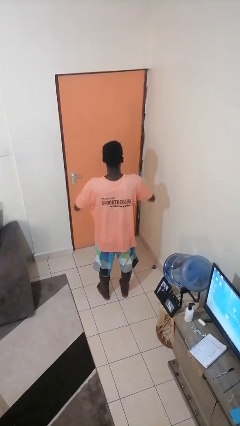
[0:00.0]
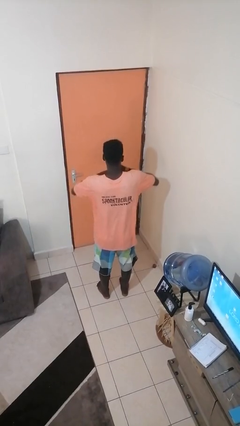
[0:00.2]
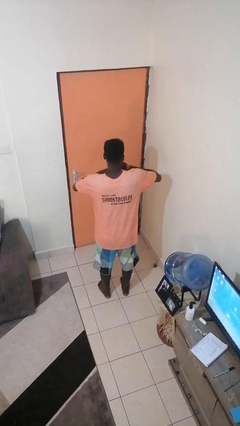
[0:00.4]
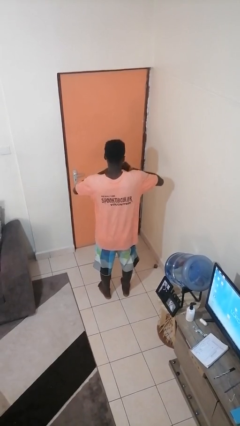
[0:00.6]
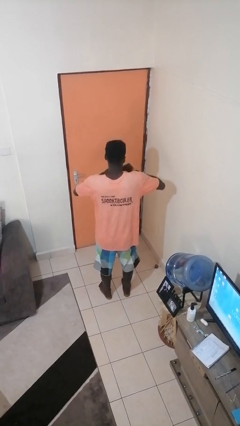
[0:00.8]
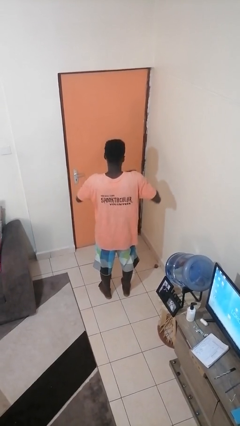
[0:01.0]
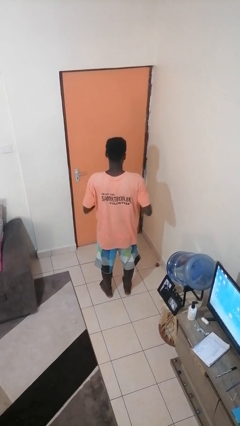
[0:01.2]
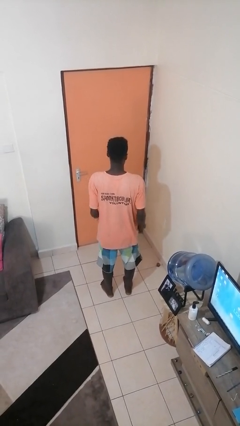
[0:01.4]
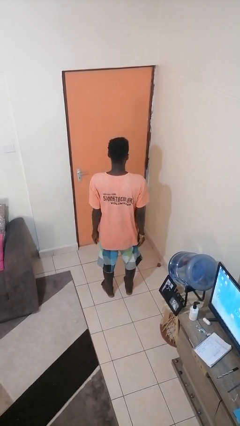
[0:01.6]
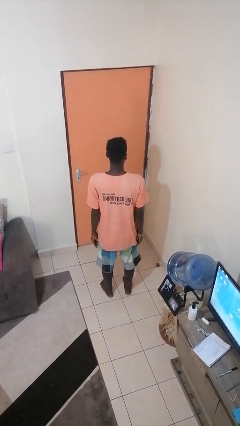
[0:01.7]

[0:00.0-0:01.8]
person takes off ring

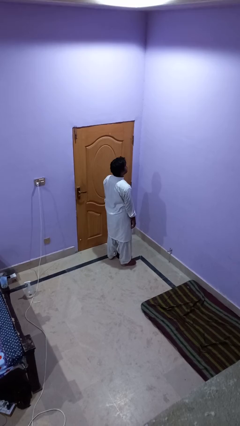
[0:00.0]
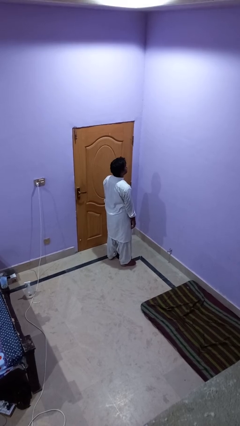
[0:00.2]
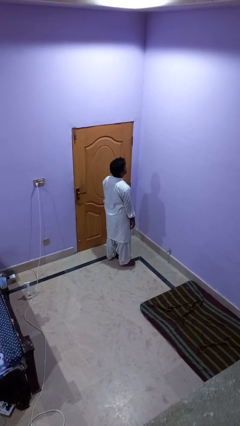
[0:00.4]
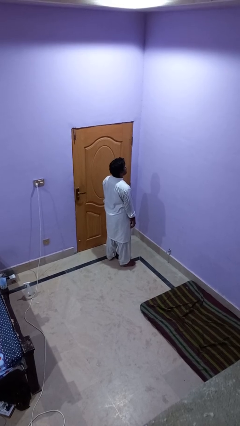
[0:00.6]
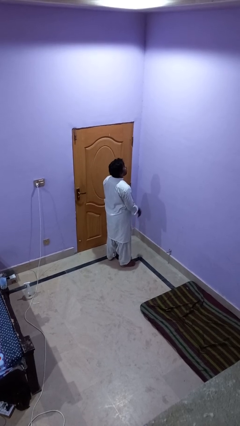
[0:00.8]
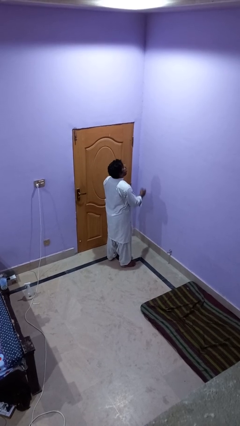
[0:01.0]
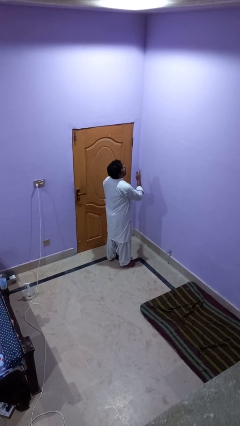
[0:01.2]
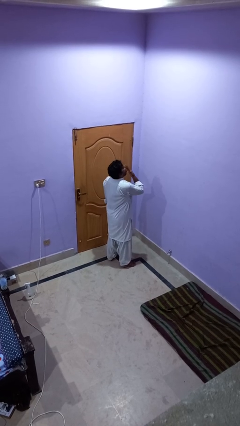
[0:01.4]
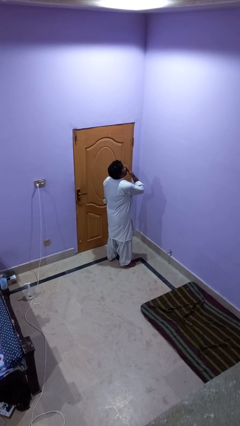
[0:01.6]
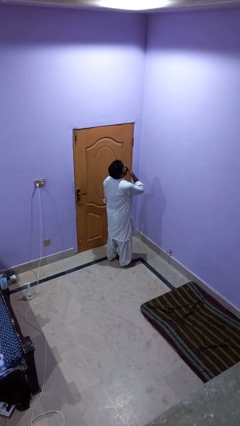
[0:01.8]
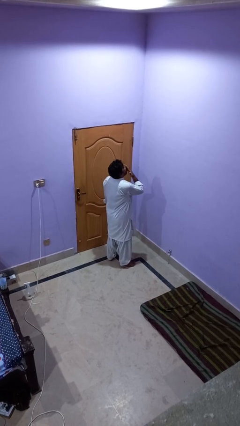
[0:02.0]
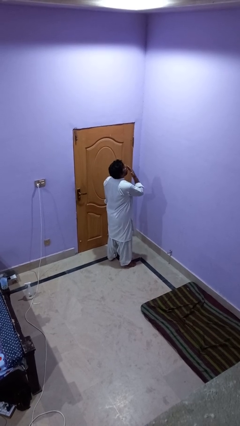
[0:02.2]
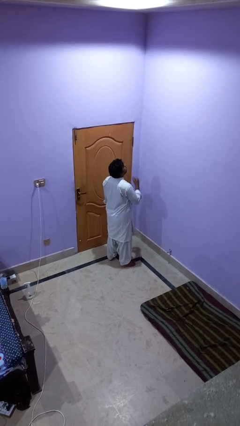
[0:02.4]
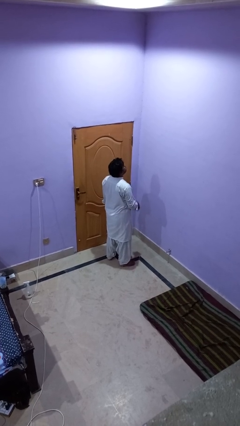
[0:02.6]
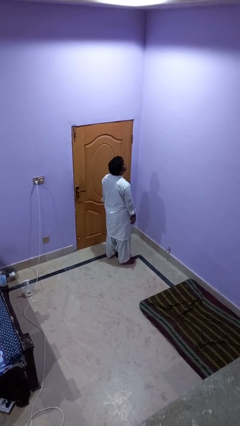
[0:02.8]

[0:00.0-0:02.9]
person yawns

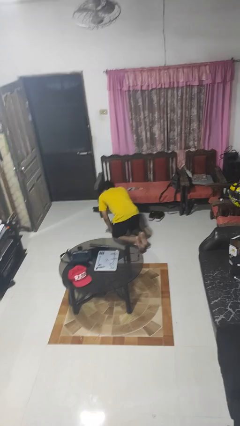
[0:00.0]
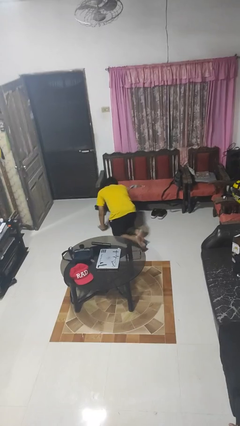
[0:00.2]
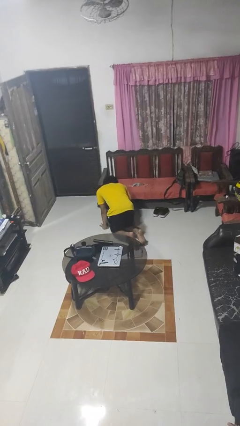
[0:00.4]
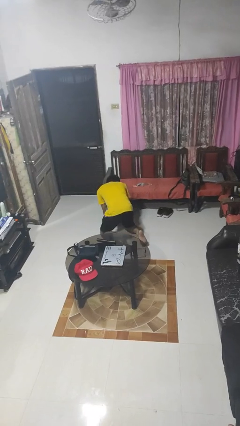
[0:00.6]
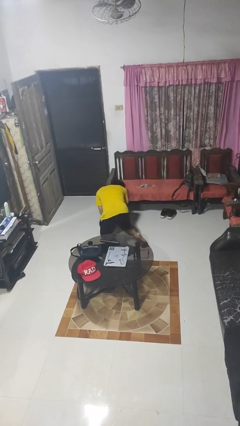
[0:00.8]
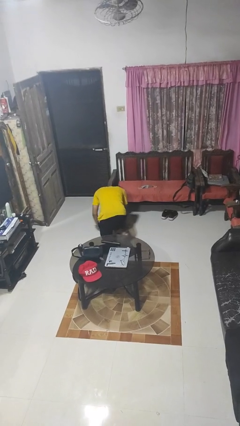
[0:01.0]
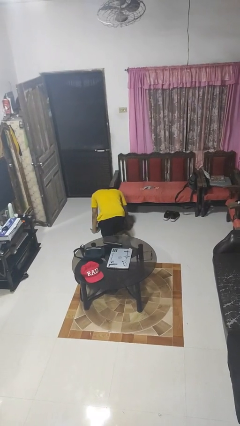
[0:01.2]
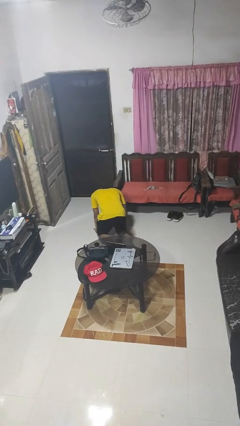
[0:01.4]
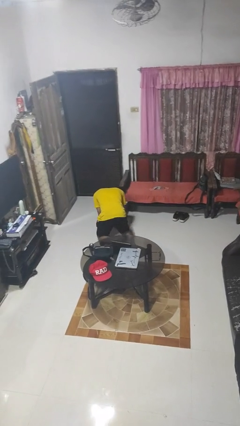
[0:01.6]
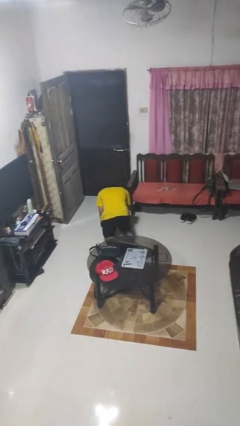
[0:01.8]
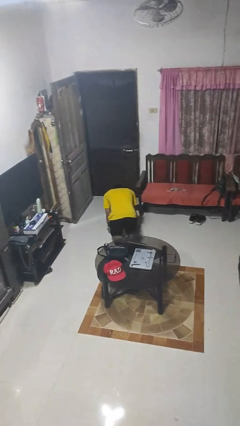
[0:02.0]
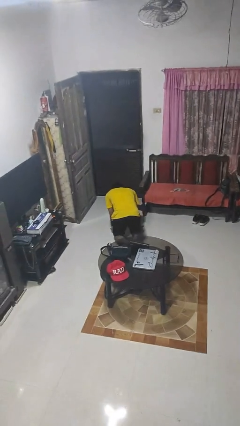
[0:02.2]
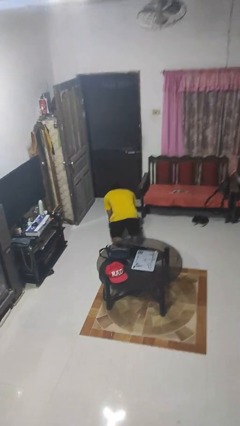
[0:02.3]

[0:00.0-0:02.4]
person crawls

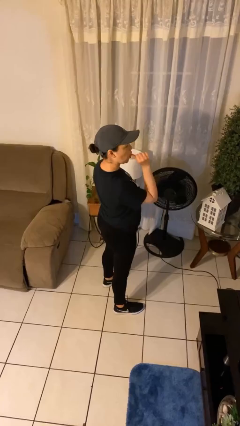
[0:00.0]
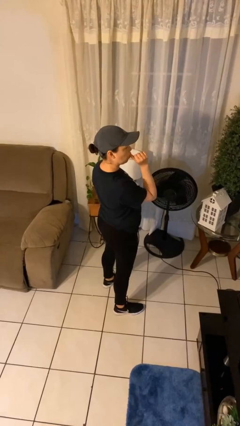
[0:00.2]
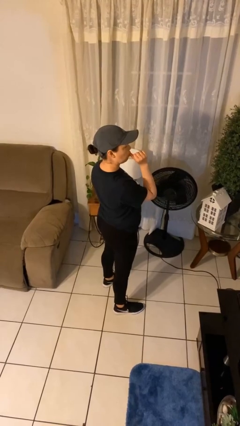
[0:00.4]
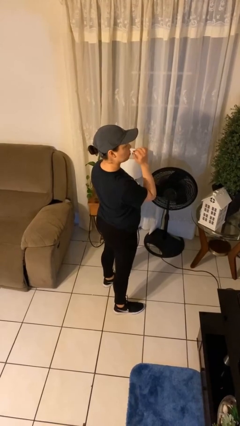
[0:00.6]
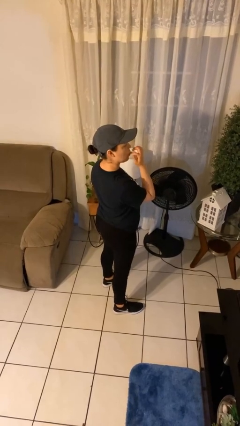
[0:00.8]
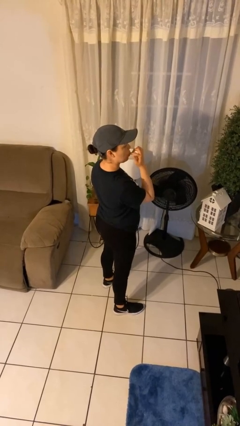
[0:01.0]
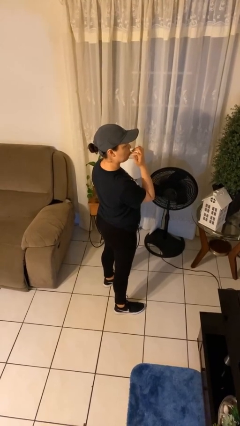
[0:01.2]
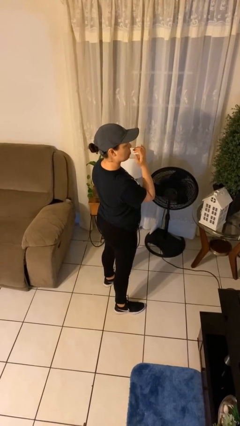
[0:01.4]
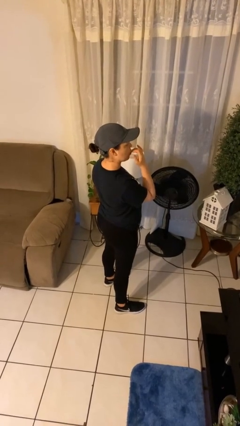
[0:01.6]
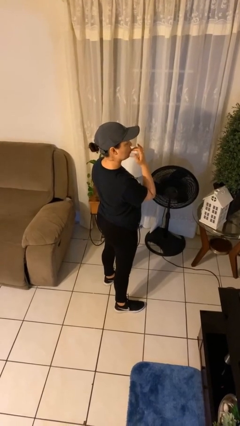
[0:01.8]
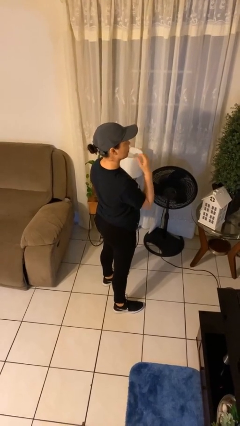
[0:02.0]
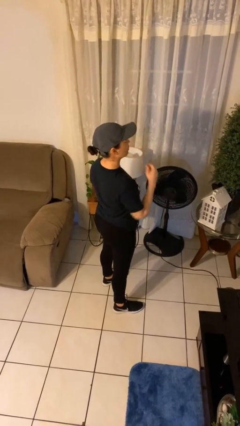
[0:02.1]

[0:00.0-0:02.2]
person licks fingers

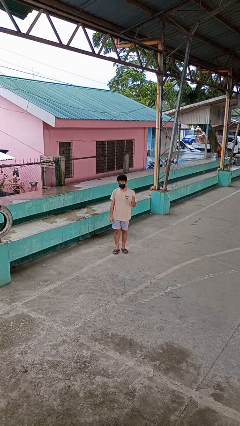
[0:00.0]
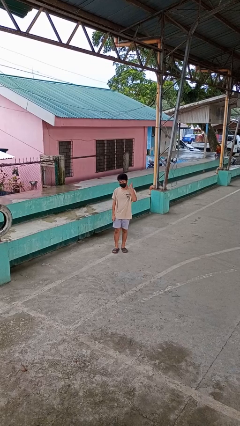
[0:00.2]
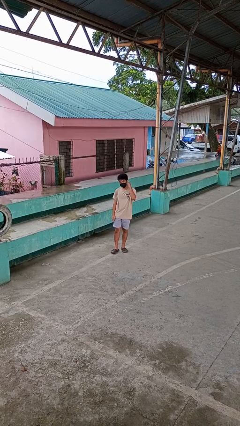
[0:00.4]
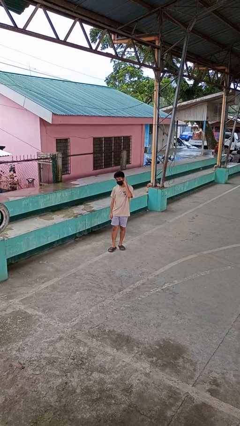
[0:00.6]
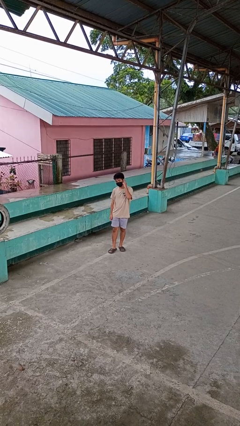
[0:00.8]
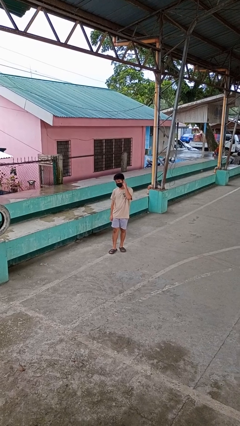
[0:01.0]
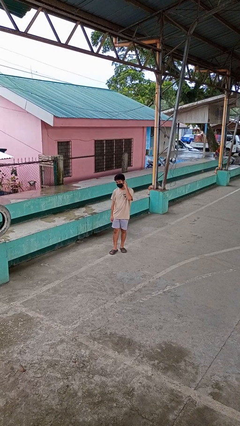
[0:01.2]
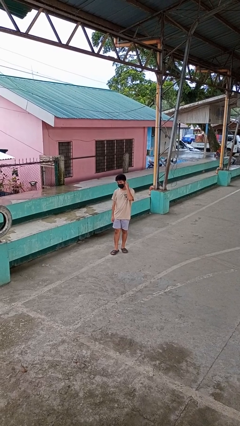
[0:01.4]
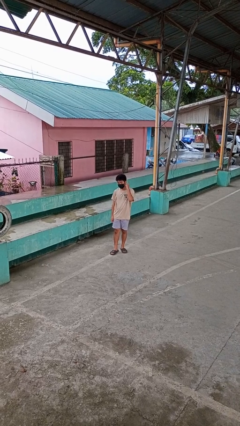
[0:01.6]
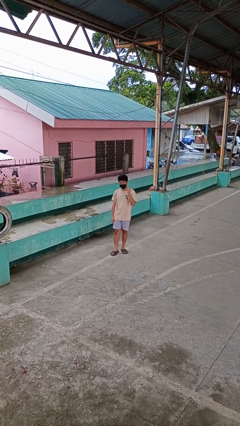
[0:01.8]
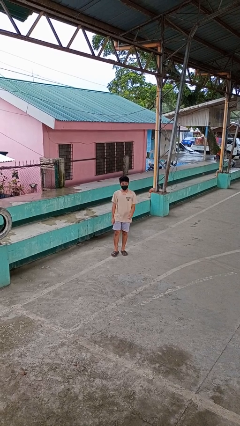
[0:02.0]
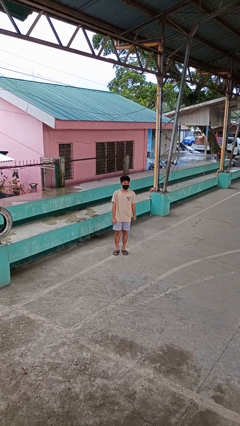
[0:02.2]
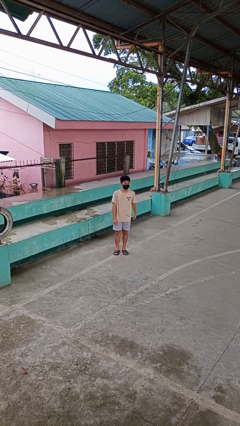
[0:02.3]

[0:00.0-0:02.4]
person gestures listen closely

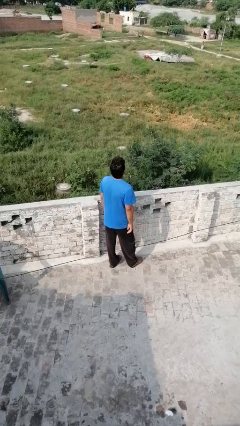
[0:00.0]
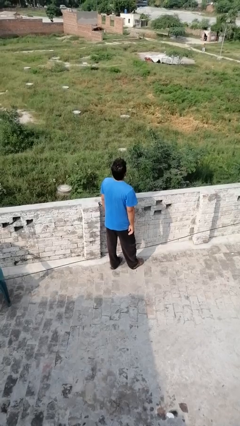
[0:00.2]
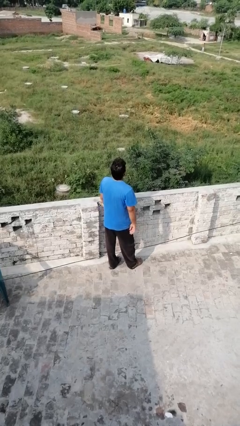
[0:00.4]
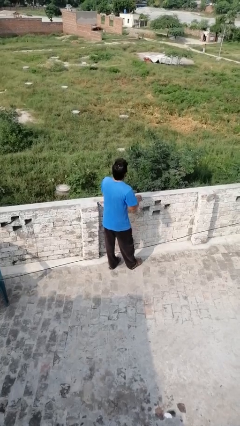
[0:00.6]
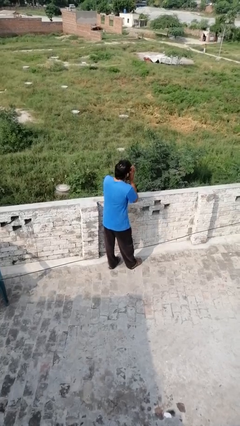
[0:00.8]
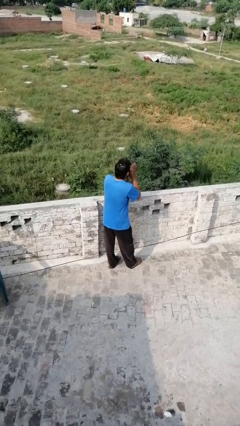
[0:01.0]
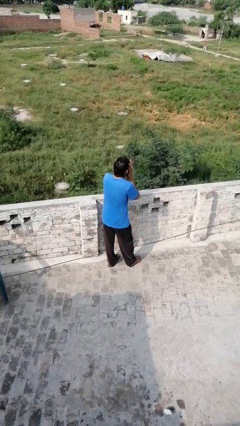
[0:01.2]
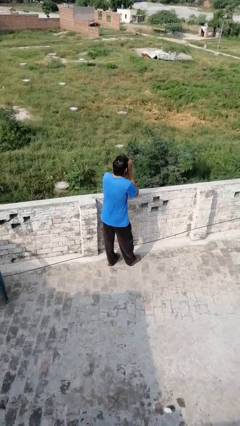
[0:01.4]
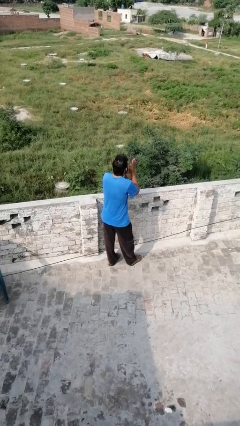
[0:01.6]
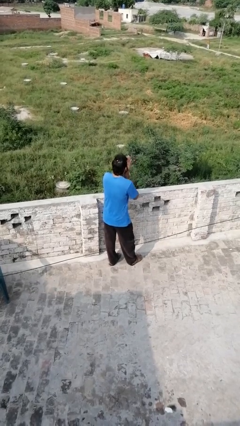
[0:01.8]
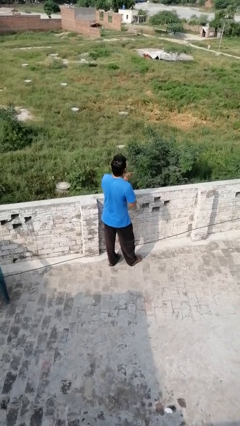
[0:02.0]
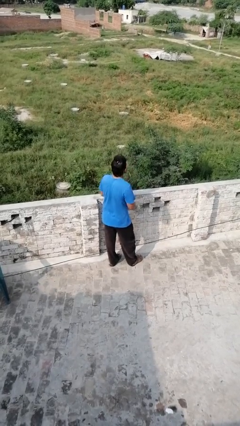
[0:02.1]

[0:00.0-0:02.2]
person blows into hands

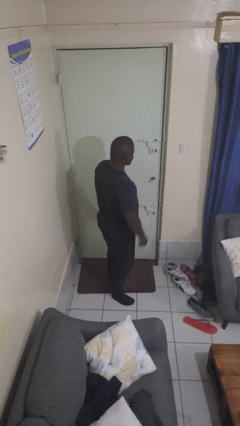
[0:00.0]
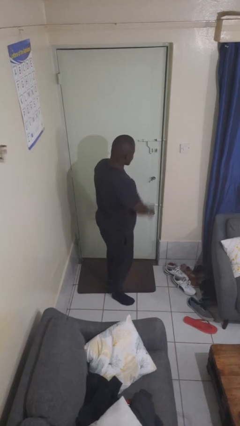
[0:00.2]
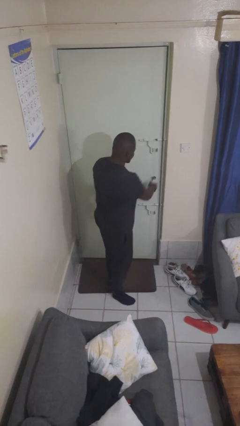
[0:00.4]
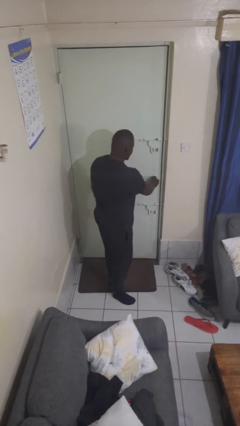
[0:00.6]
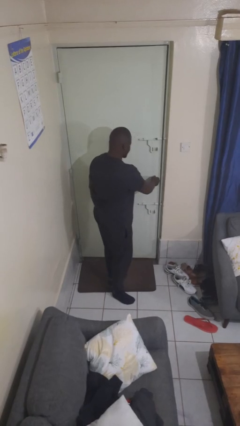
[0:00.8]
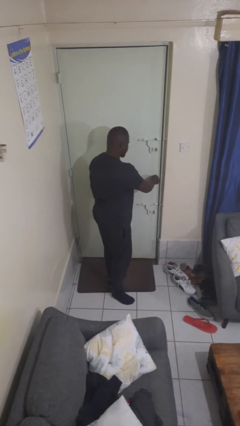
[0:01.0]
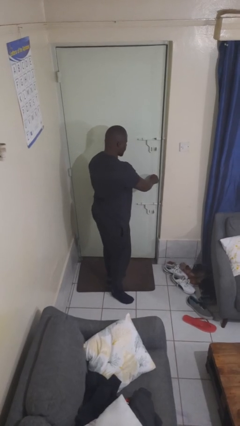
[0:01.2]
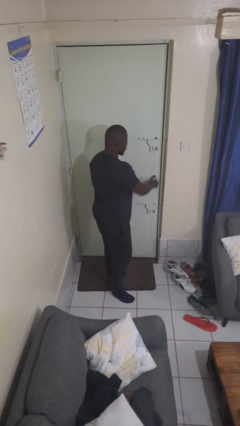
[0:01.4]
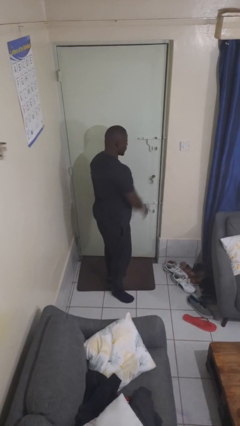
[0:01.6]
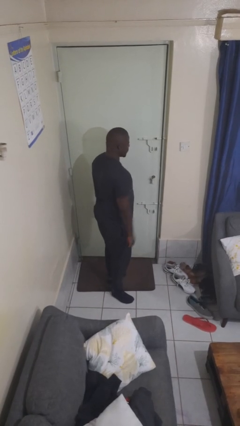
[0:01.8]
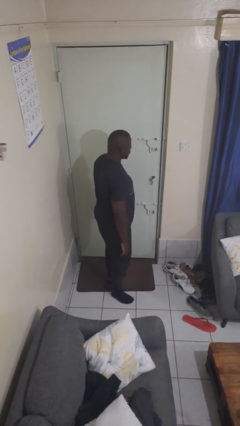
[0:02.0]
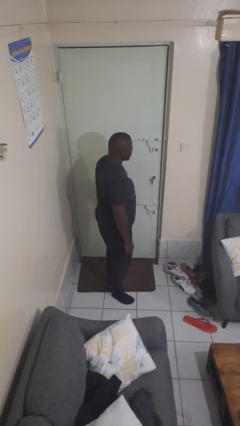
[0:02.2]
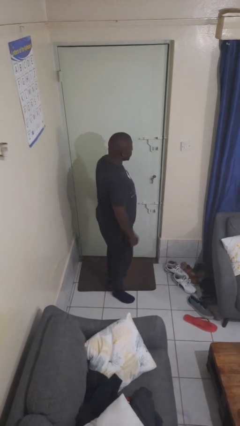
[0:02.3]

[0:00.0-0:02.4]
person unlocks door with keys

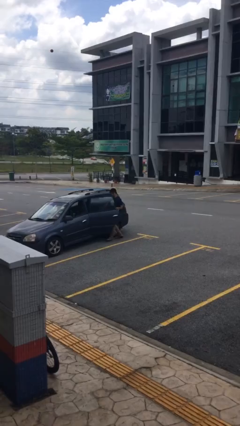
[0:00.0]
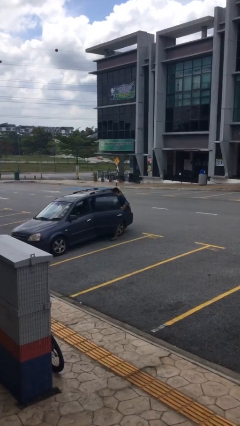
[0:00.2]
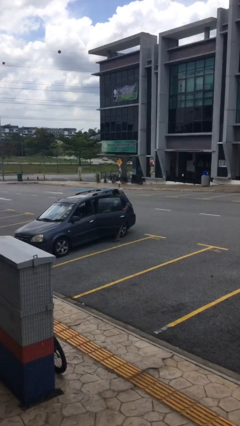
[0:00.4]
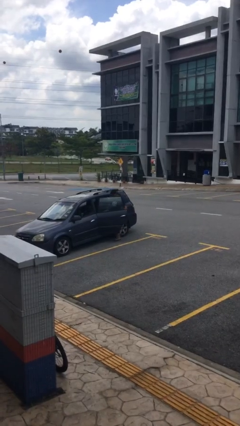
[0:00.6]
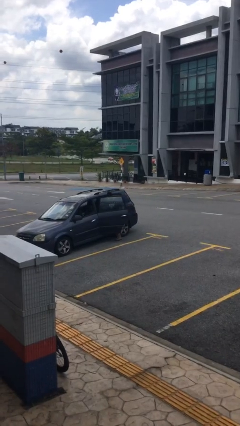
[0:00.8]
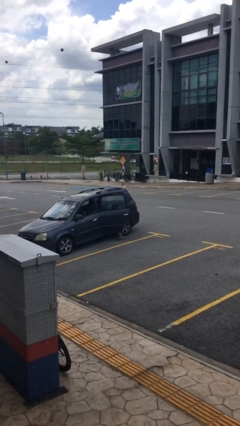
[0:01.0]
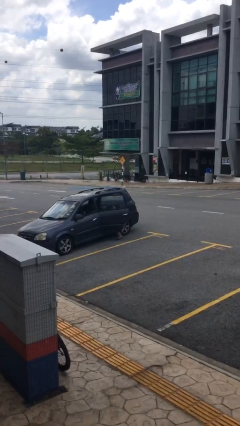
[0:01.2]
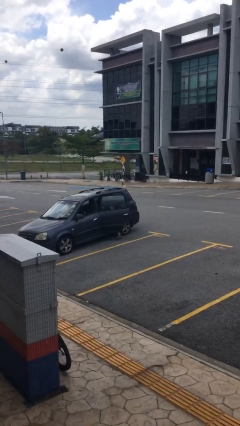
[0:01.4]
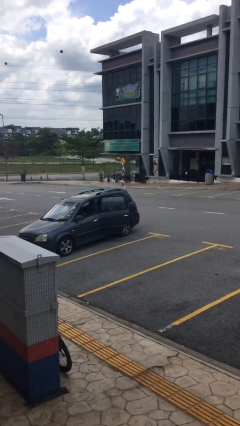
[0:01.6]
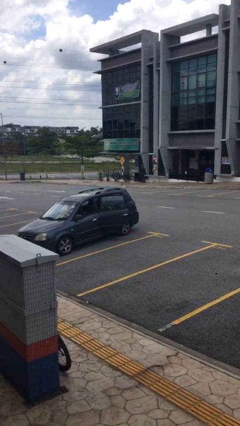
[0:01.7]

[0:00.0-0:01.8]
person enters car
